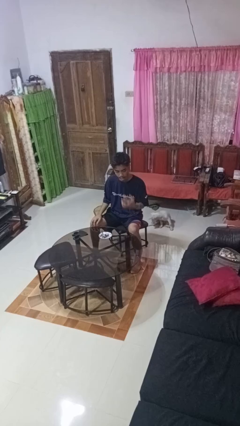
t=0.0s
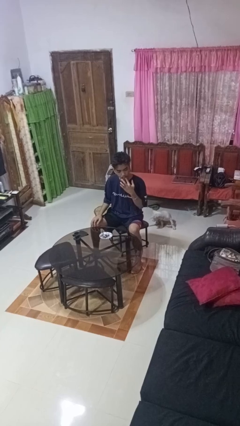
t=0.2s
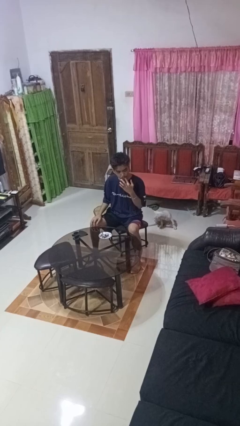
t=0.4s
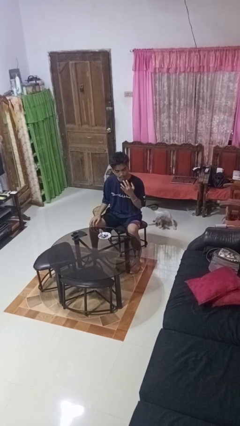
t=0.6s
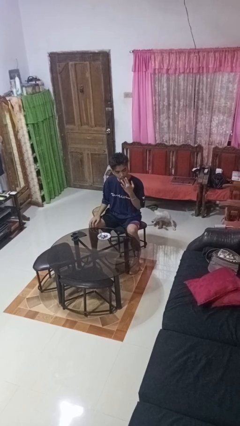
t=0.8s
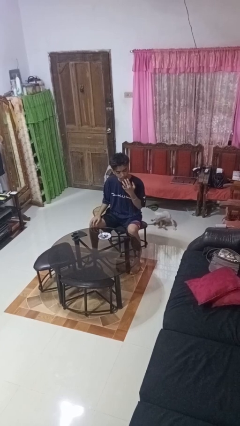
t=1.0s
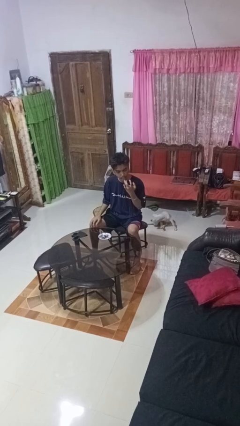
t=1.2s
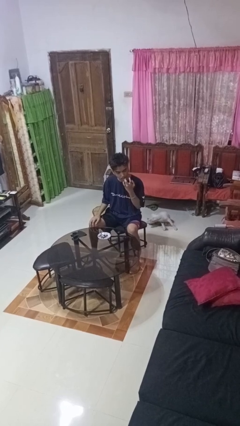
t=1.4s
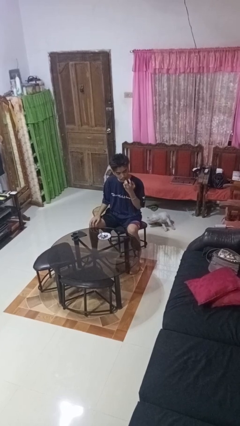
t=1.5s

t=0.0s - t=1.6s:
person licks fingers

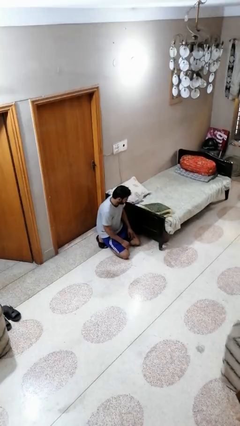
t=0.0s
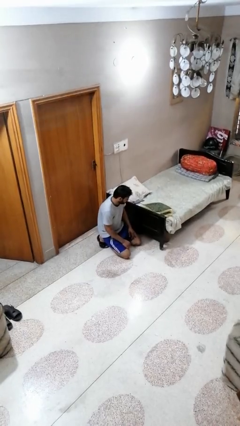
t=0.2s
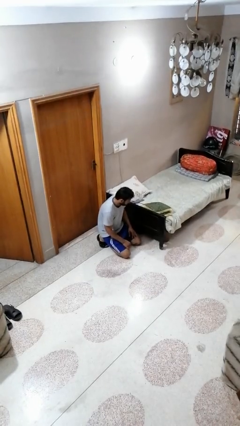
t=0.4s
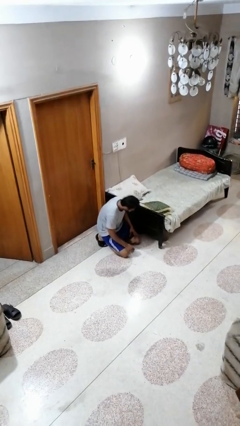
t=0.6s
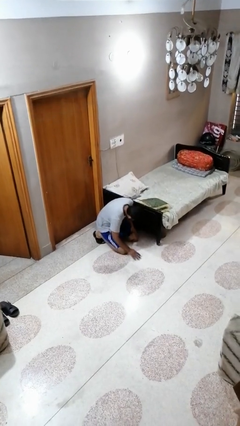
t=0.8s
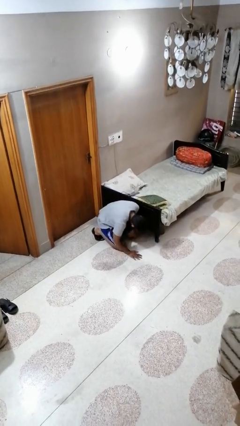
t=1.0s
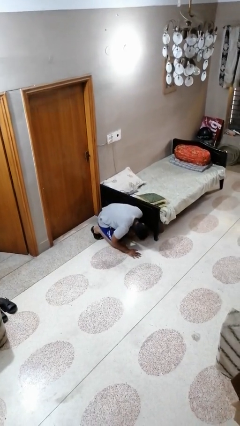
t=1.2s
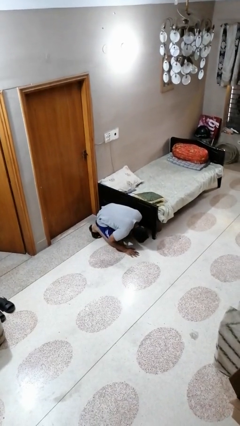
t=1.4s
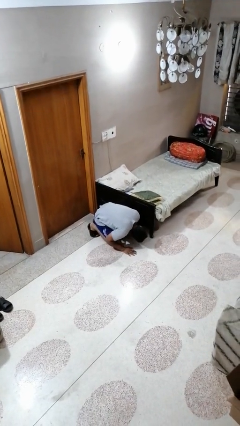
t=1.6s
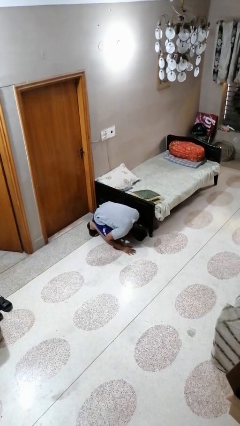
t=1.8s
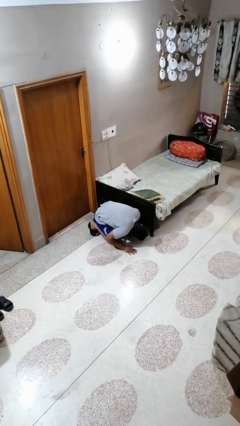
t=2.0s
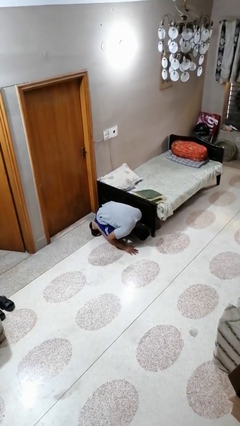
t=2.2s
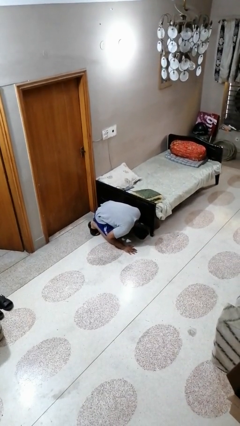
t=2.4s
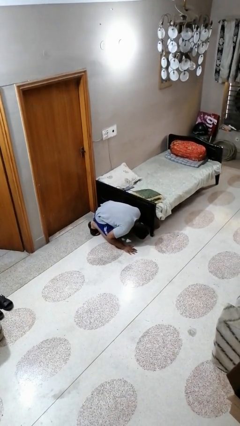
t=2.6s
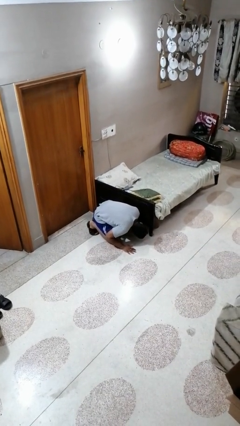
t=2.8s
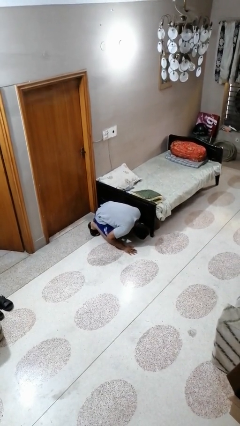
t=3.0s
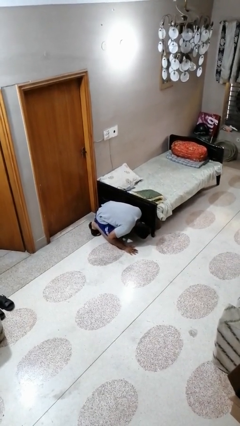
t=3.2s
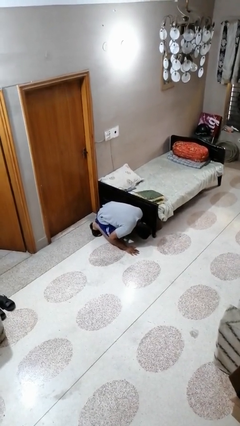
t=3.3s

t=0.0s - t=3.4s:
person searches under bed

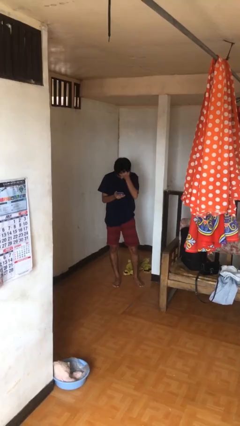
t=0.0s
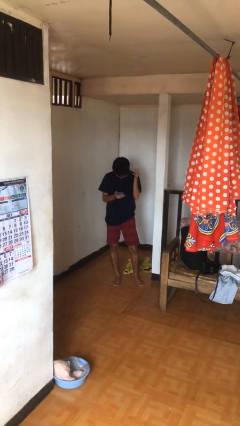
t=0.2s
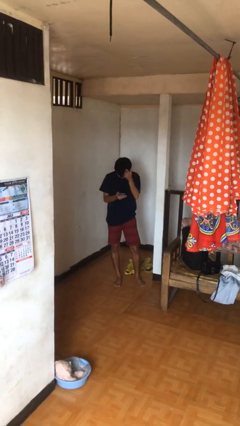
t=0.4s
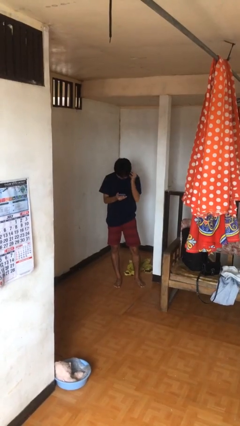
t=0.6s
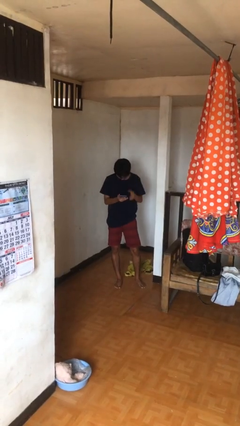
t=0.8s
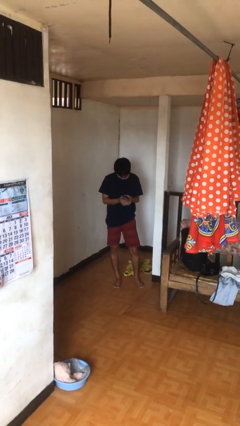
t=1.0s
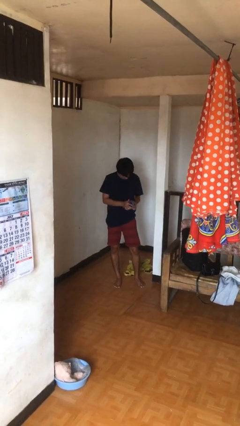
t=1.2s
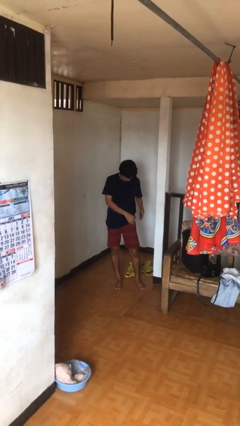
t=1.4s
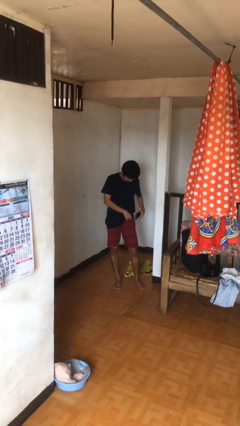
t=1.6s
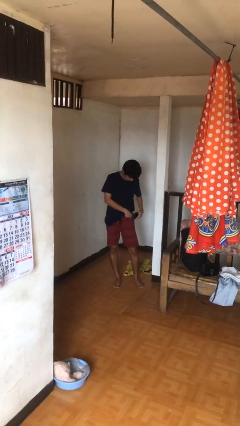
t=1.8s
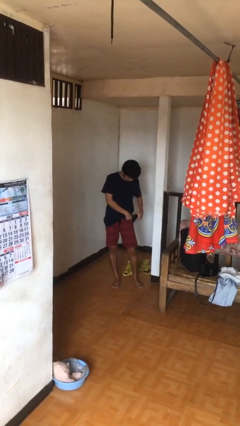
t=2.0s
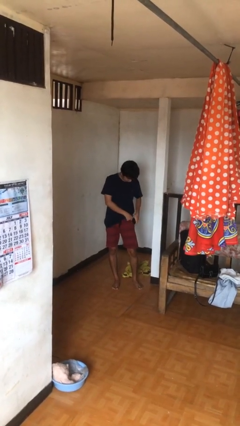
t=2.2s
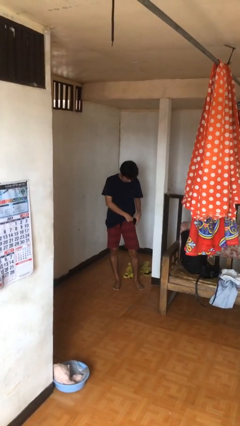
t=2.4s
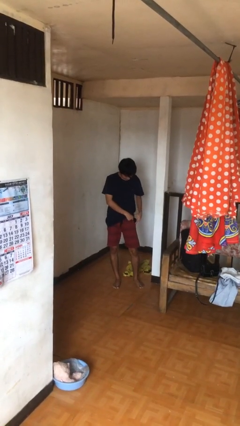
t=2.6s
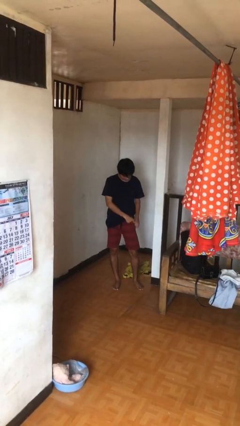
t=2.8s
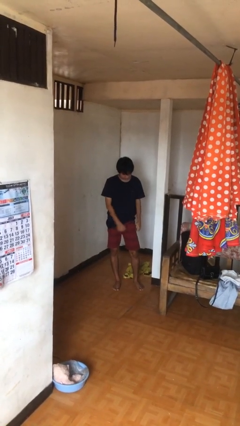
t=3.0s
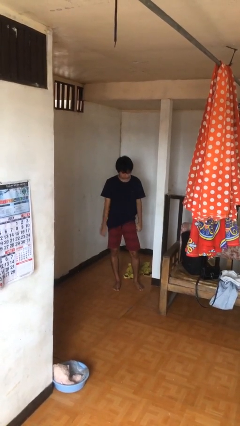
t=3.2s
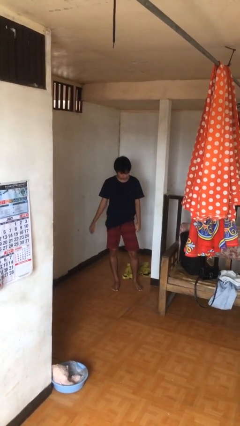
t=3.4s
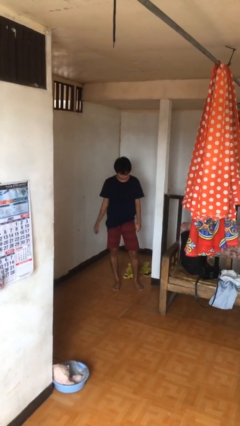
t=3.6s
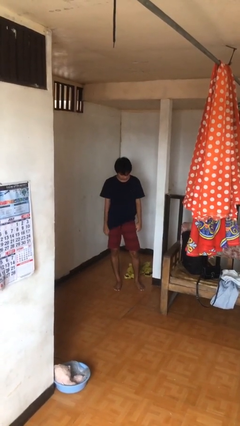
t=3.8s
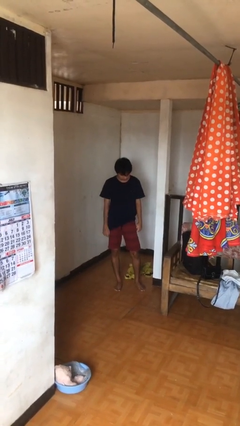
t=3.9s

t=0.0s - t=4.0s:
person puts phone into pocket

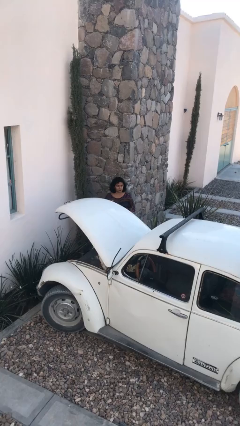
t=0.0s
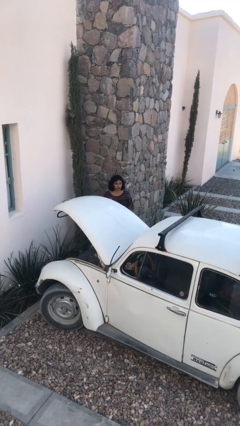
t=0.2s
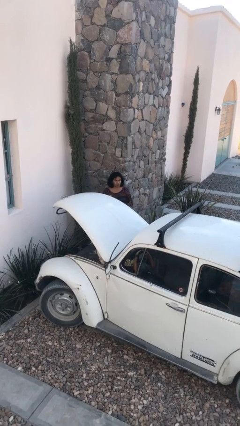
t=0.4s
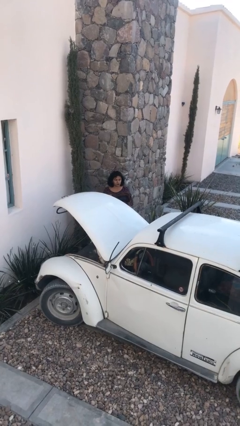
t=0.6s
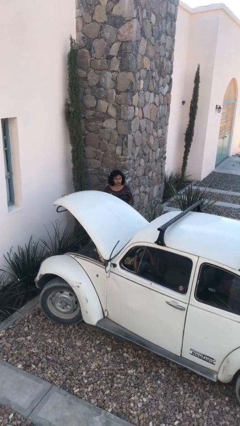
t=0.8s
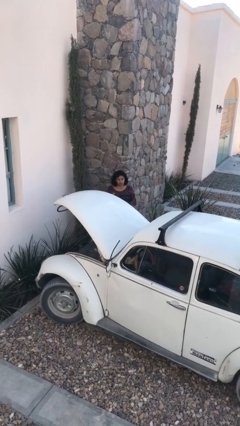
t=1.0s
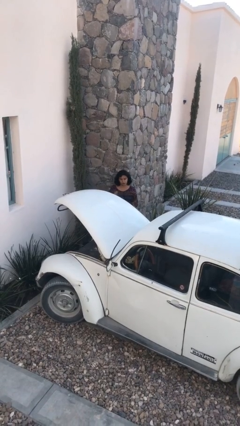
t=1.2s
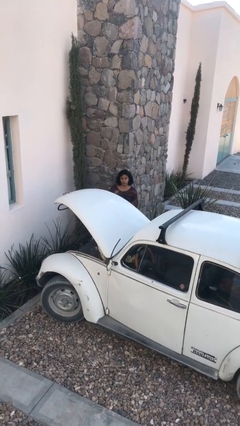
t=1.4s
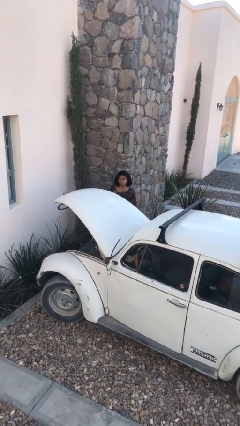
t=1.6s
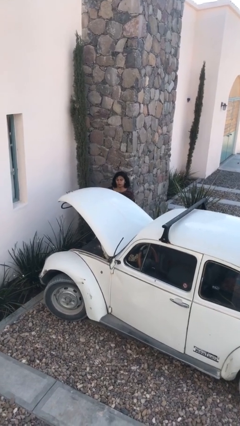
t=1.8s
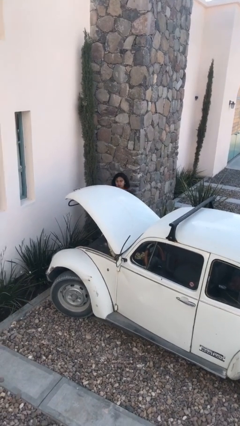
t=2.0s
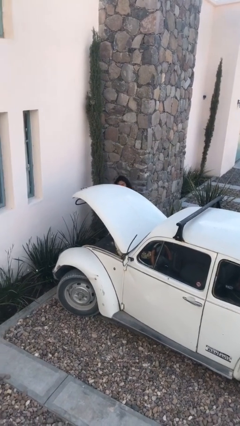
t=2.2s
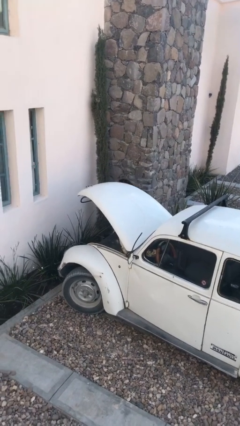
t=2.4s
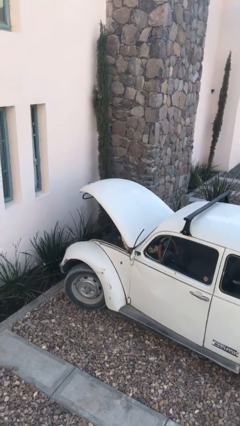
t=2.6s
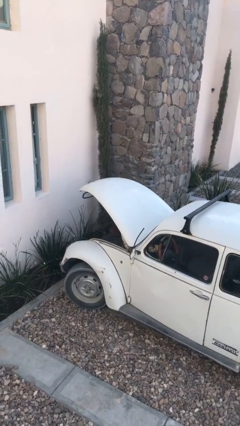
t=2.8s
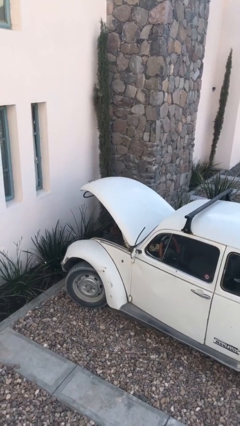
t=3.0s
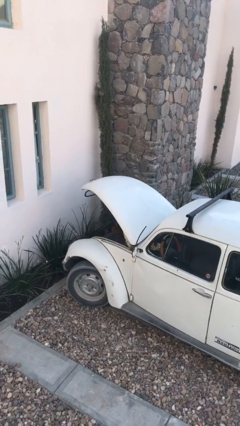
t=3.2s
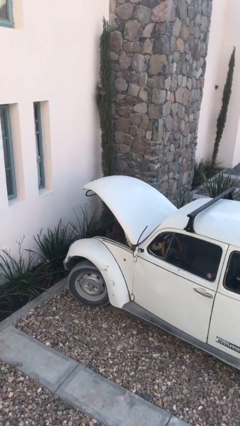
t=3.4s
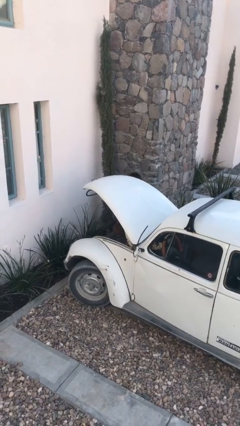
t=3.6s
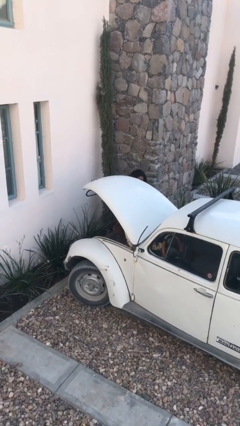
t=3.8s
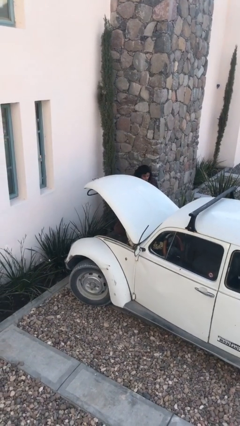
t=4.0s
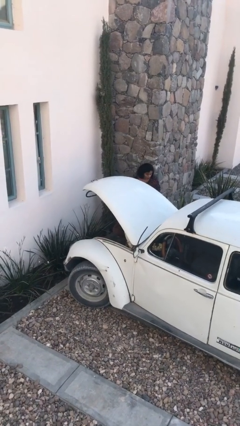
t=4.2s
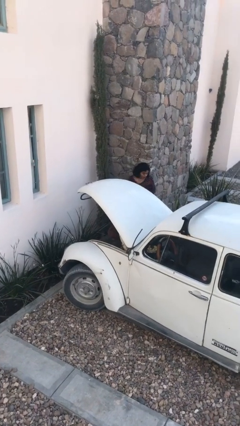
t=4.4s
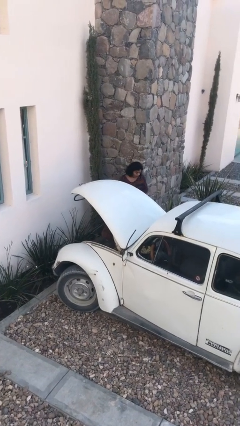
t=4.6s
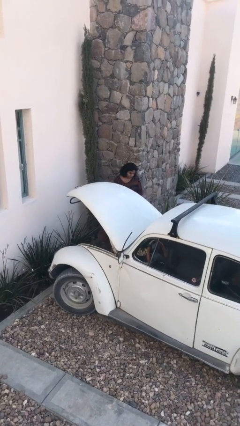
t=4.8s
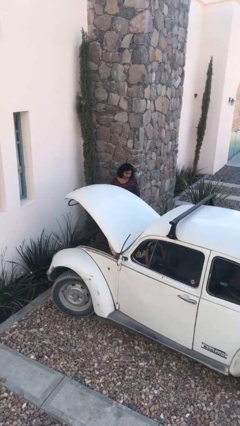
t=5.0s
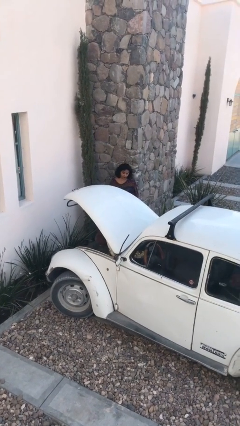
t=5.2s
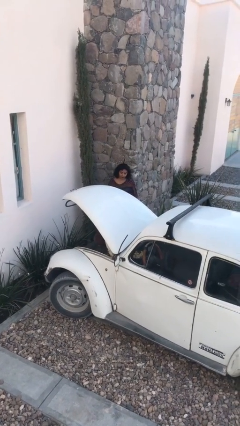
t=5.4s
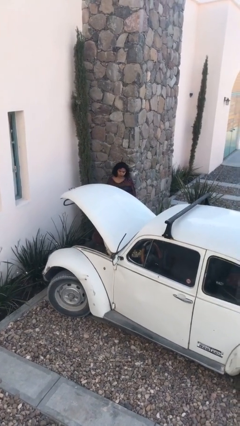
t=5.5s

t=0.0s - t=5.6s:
person loads car

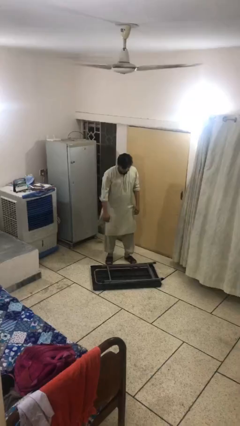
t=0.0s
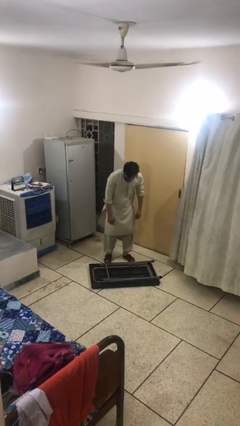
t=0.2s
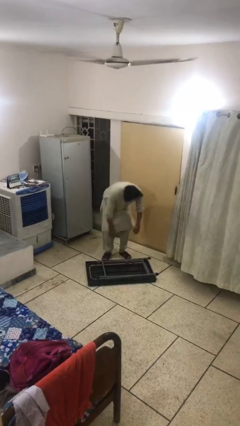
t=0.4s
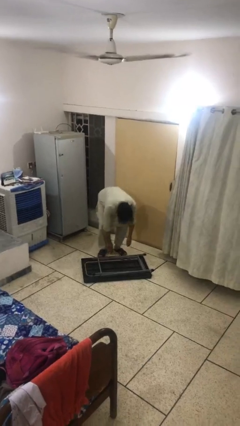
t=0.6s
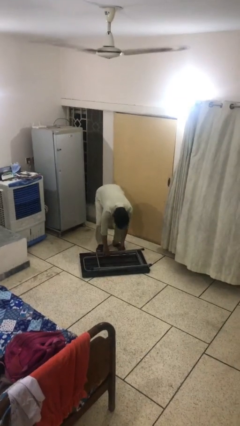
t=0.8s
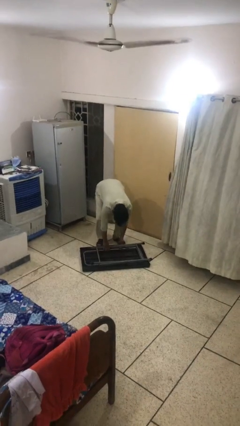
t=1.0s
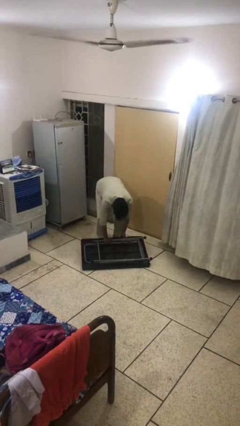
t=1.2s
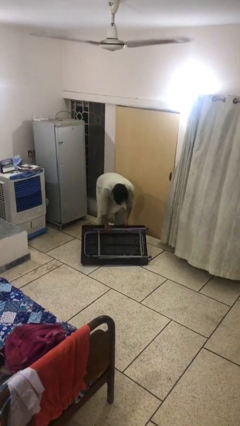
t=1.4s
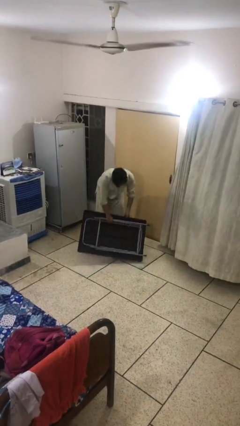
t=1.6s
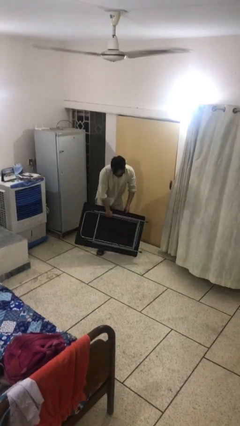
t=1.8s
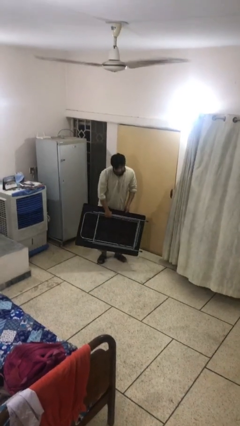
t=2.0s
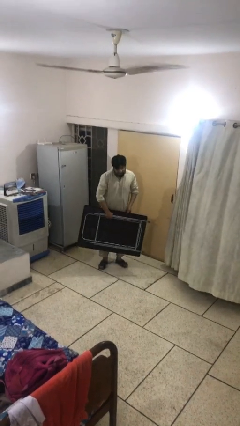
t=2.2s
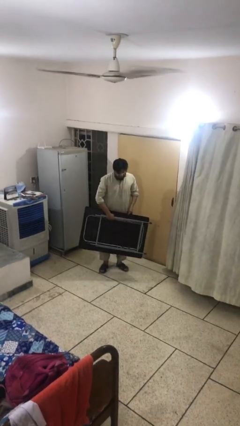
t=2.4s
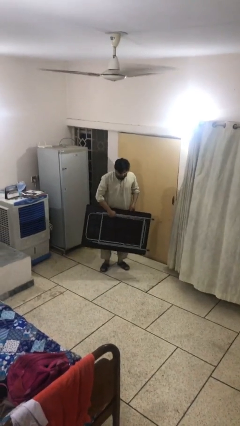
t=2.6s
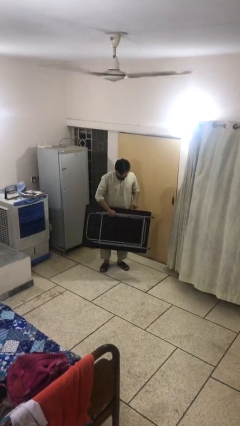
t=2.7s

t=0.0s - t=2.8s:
person picks up object from floor
